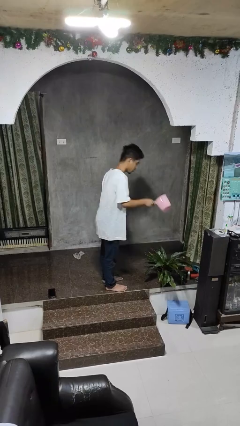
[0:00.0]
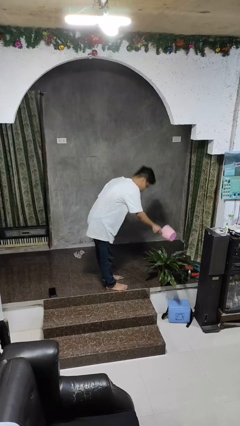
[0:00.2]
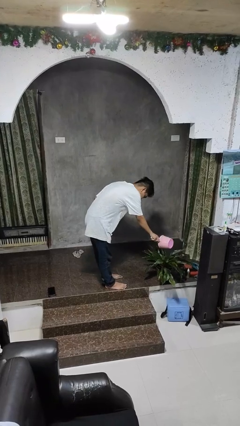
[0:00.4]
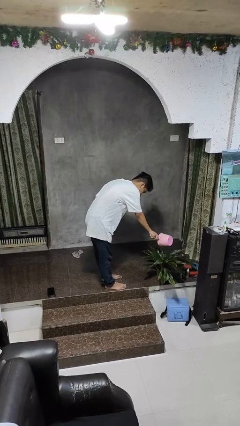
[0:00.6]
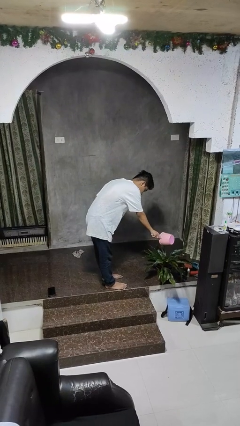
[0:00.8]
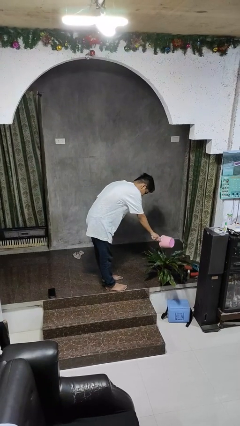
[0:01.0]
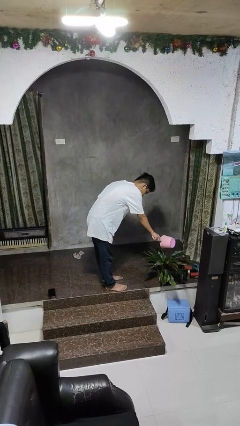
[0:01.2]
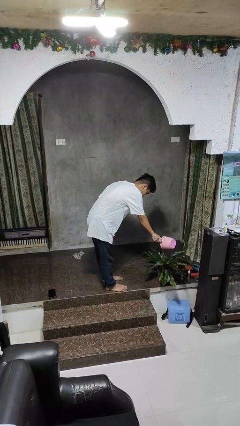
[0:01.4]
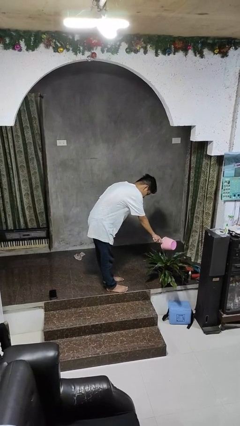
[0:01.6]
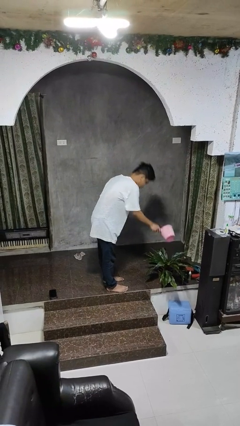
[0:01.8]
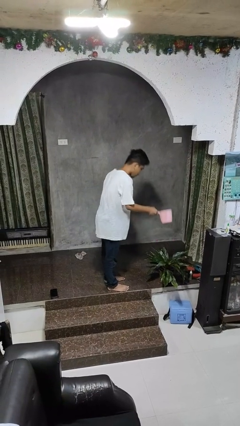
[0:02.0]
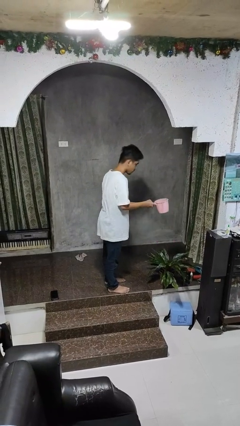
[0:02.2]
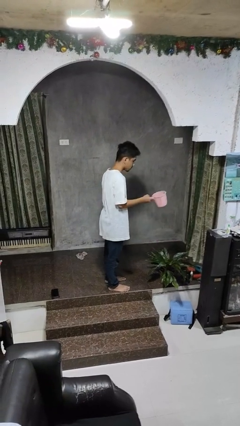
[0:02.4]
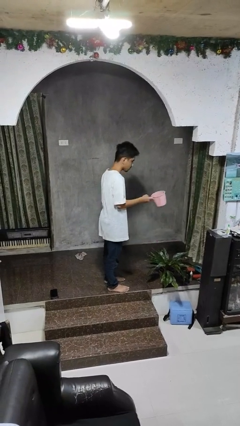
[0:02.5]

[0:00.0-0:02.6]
person waters houseplant

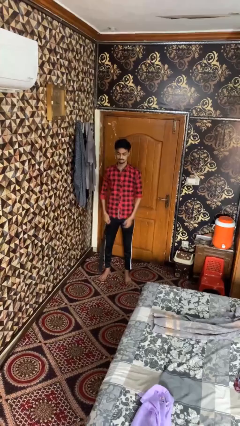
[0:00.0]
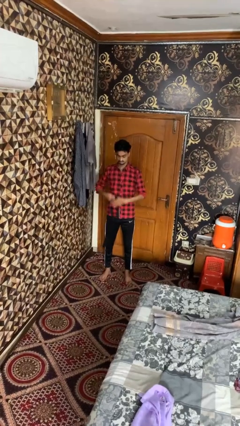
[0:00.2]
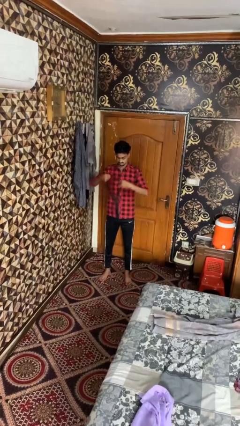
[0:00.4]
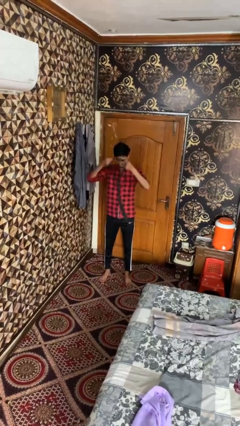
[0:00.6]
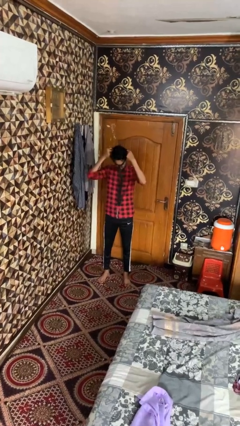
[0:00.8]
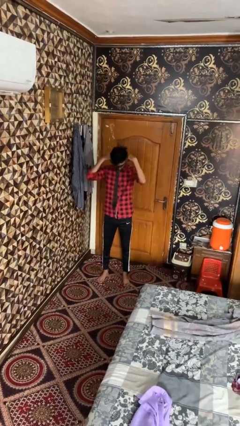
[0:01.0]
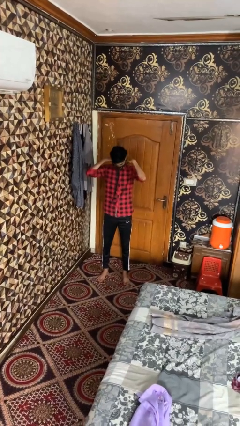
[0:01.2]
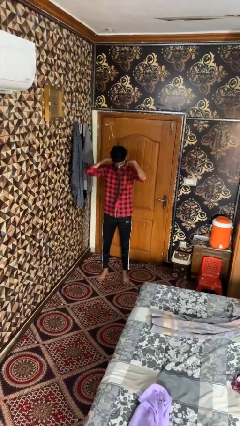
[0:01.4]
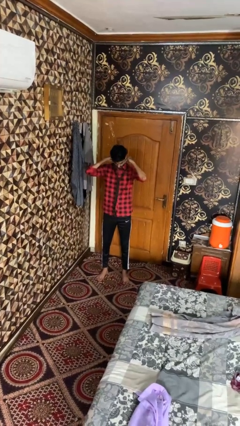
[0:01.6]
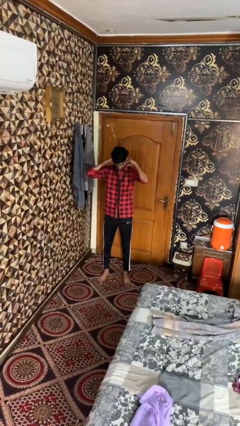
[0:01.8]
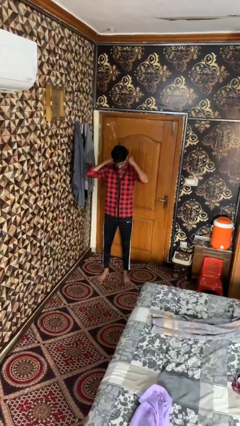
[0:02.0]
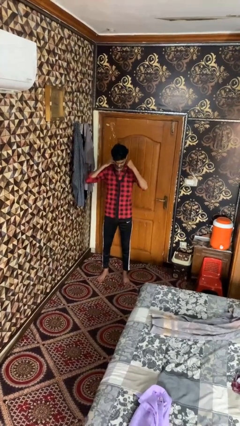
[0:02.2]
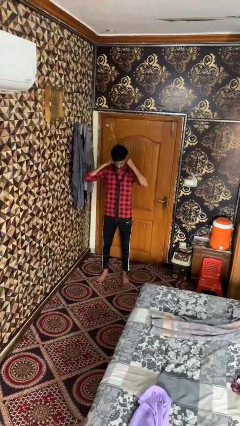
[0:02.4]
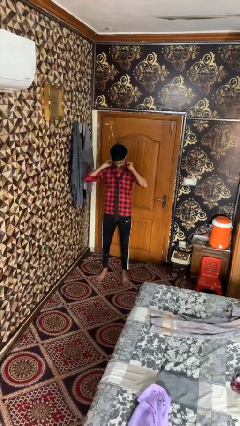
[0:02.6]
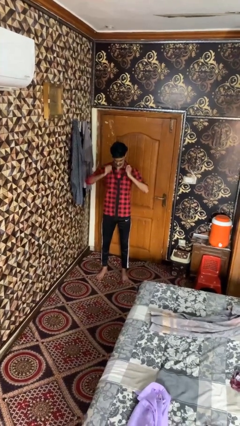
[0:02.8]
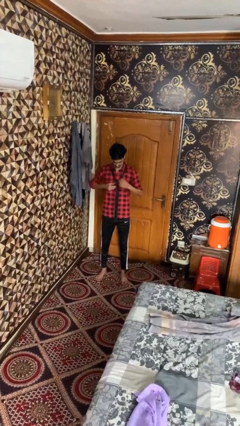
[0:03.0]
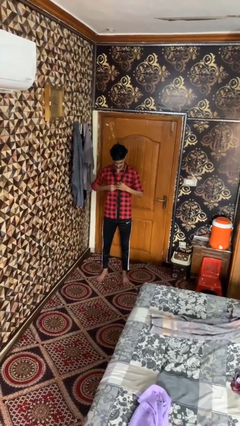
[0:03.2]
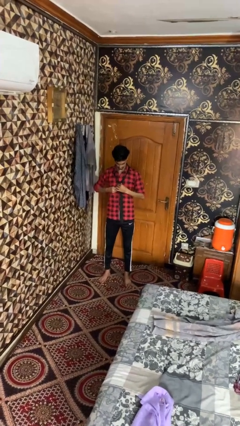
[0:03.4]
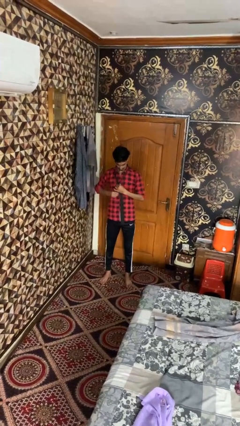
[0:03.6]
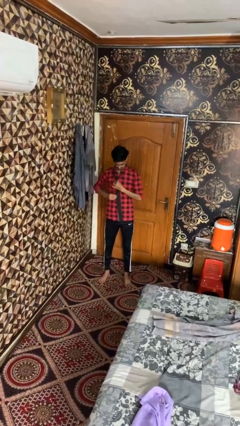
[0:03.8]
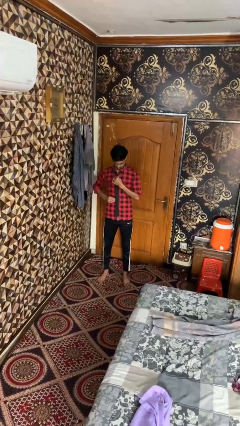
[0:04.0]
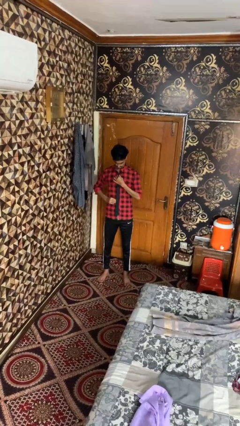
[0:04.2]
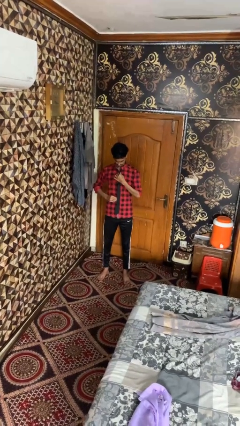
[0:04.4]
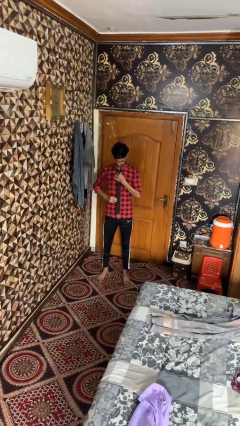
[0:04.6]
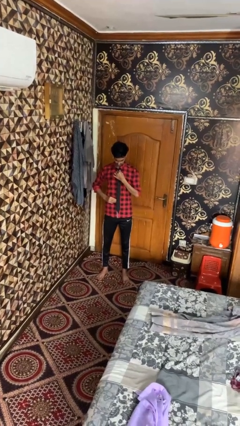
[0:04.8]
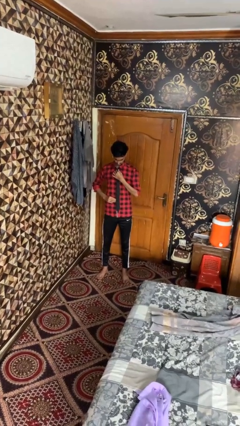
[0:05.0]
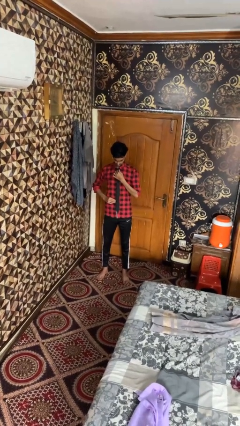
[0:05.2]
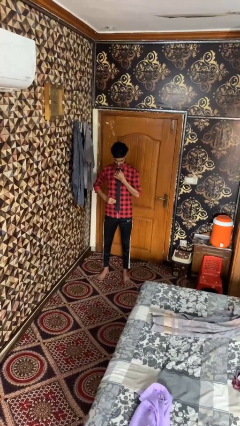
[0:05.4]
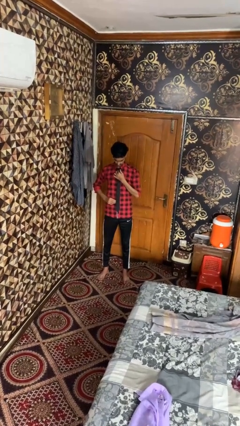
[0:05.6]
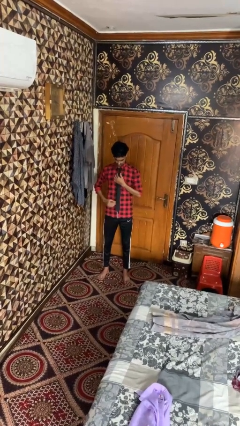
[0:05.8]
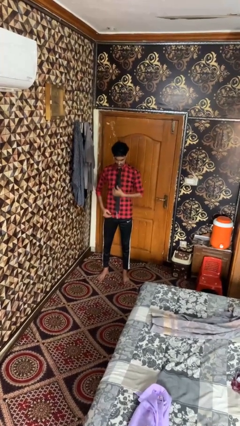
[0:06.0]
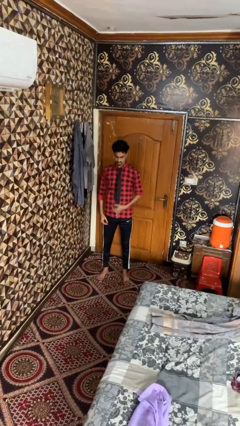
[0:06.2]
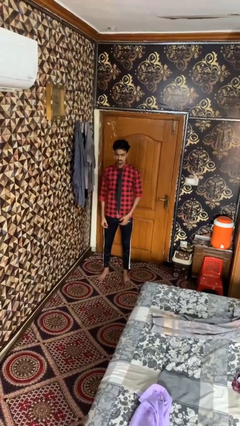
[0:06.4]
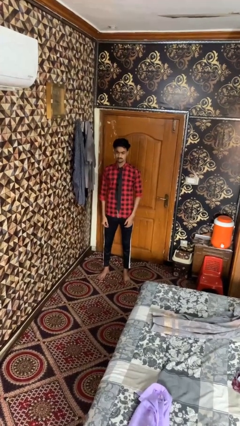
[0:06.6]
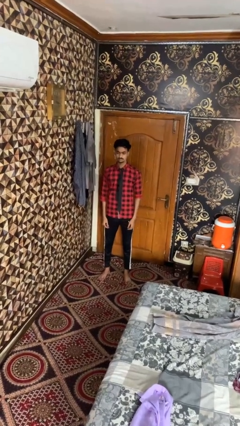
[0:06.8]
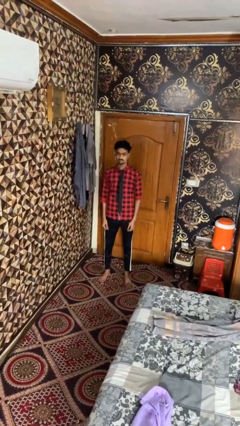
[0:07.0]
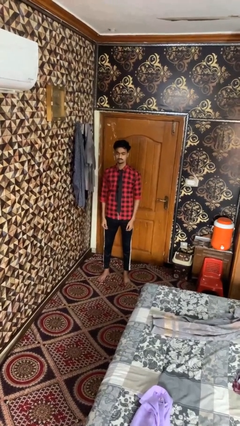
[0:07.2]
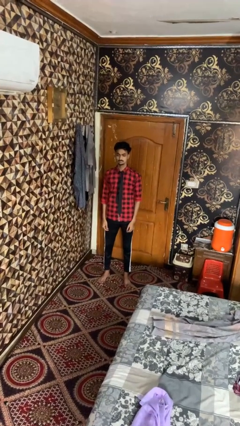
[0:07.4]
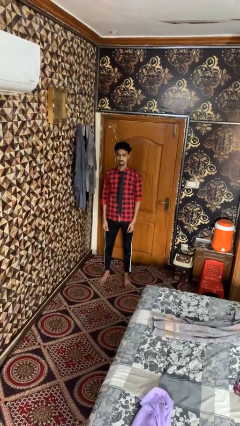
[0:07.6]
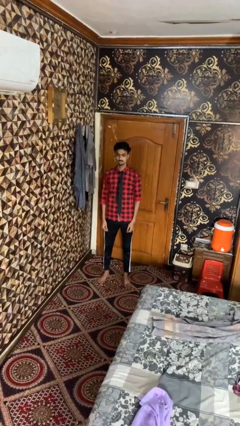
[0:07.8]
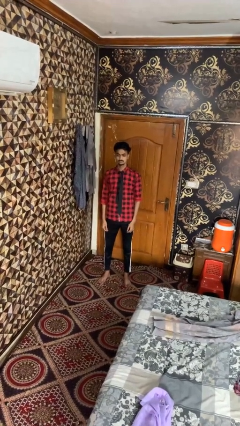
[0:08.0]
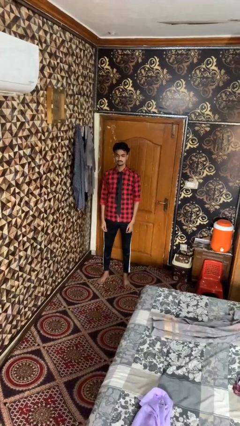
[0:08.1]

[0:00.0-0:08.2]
person puts on necktie

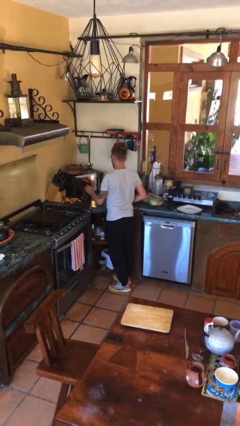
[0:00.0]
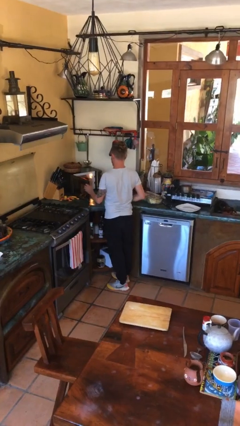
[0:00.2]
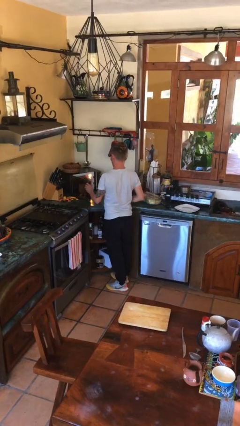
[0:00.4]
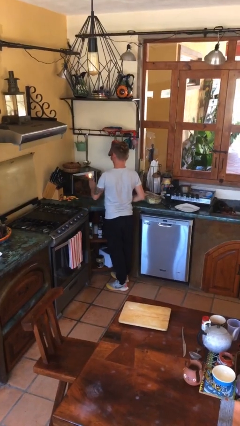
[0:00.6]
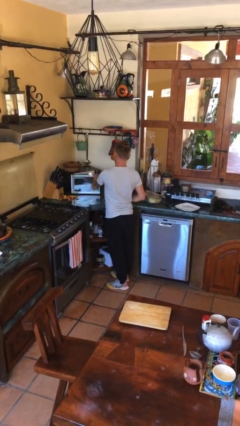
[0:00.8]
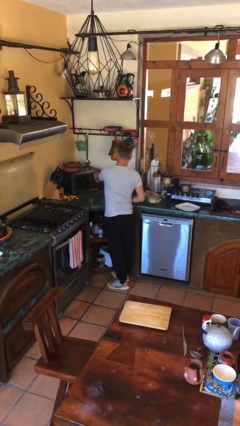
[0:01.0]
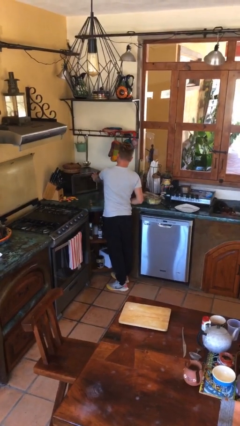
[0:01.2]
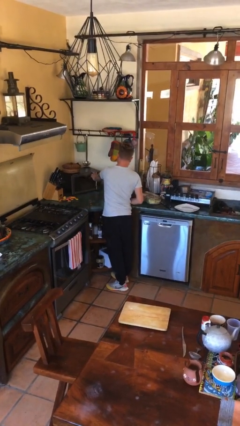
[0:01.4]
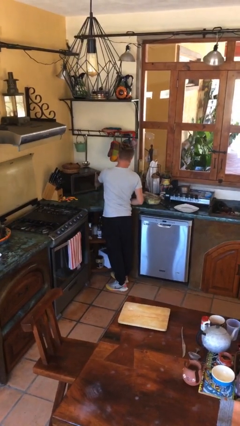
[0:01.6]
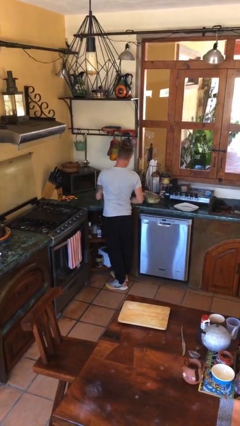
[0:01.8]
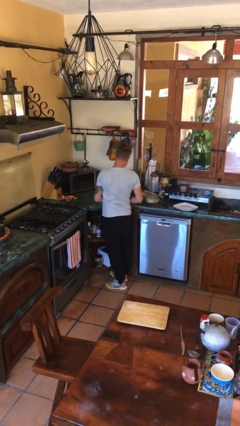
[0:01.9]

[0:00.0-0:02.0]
person closes microwave

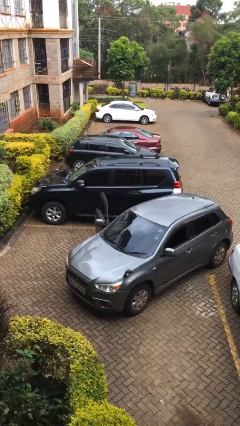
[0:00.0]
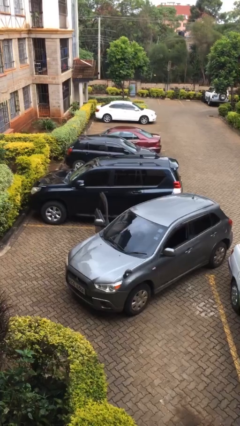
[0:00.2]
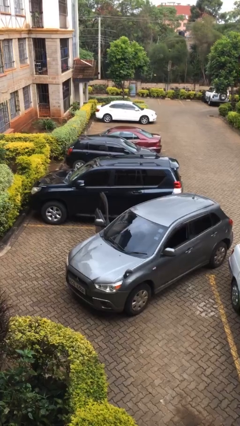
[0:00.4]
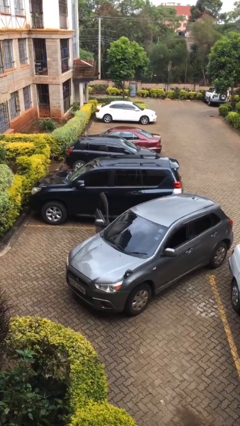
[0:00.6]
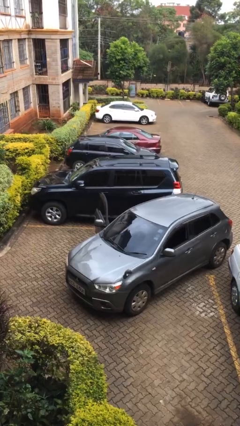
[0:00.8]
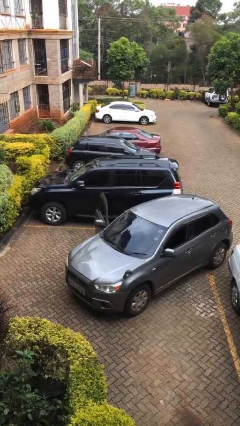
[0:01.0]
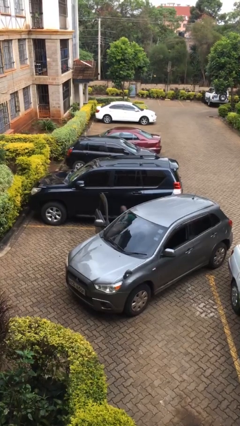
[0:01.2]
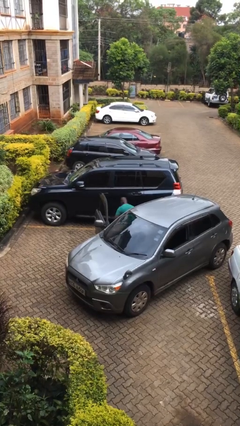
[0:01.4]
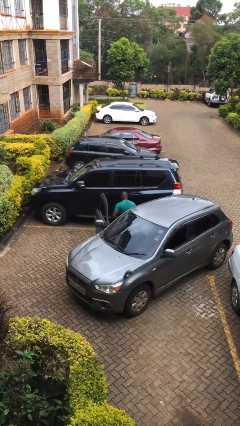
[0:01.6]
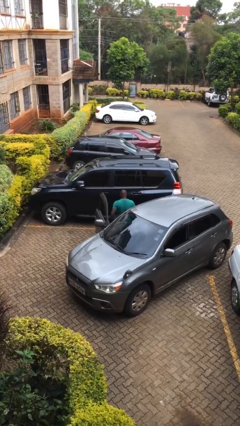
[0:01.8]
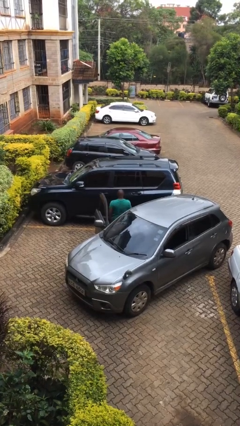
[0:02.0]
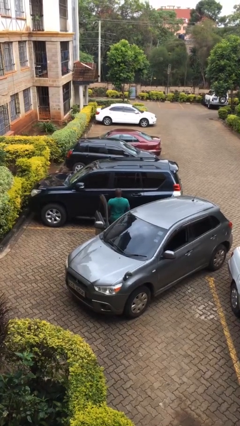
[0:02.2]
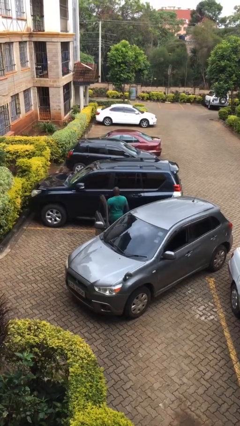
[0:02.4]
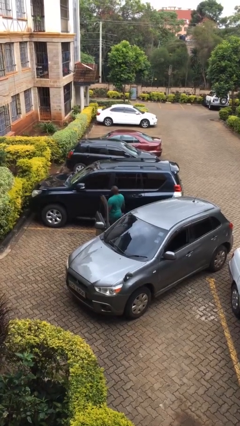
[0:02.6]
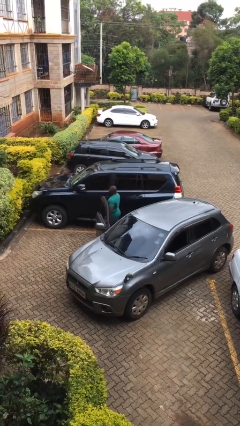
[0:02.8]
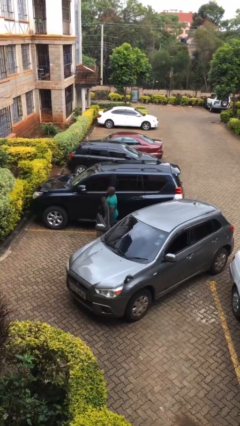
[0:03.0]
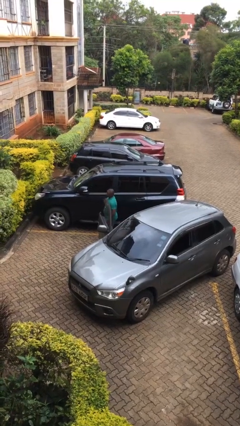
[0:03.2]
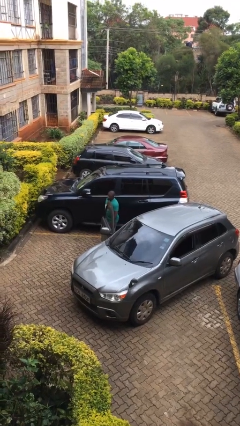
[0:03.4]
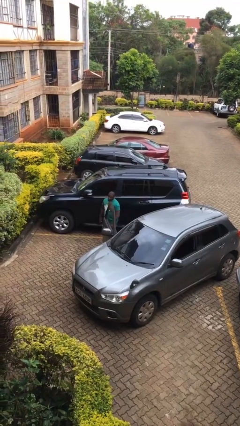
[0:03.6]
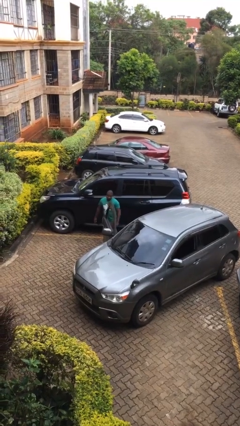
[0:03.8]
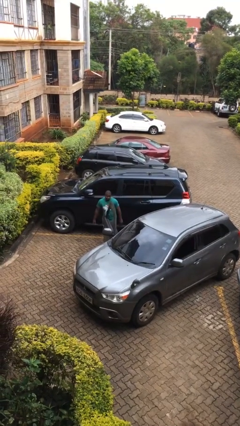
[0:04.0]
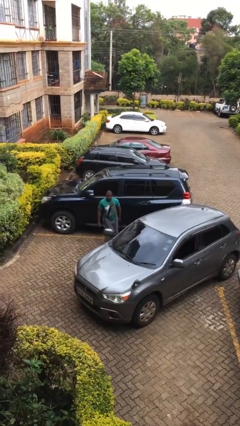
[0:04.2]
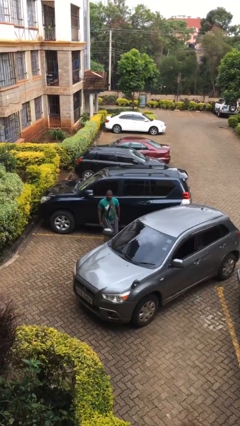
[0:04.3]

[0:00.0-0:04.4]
person exits car

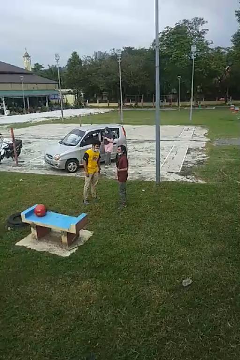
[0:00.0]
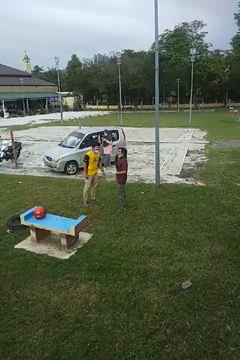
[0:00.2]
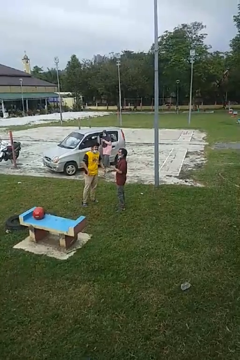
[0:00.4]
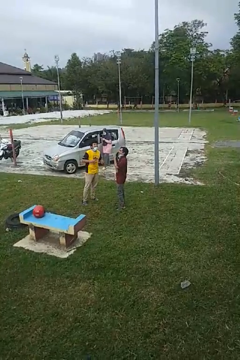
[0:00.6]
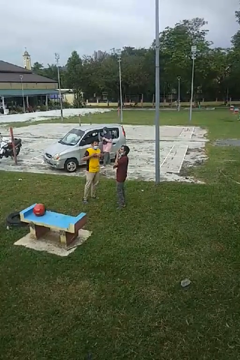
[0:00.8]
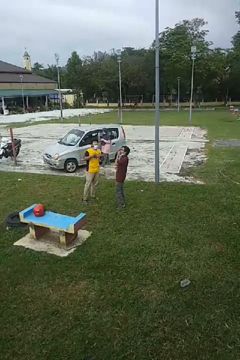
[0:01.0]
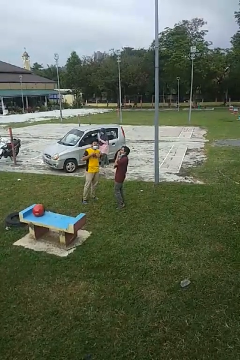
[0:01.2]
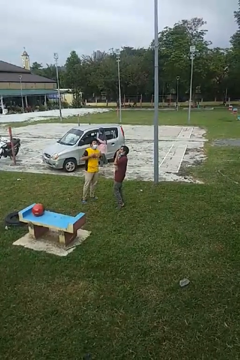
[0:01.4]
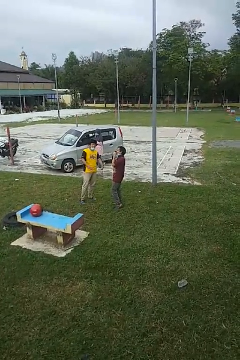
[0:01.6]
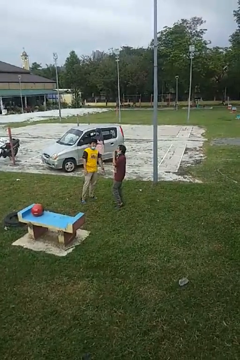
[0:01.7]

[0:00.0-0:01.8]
person laughs with person
